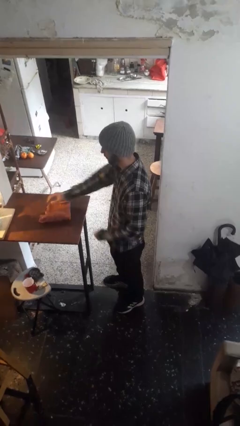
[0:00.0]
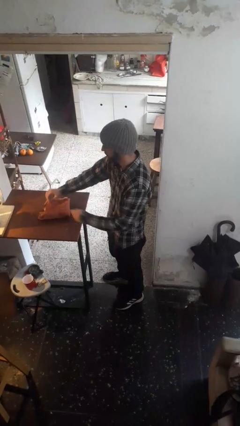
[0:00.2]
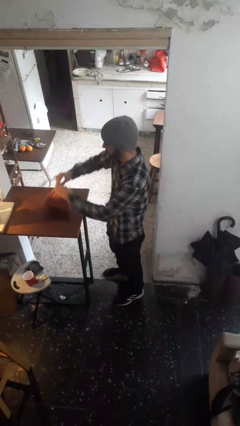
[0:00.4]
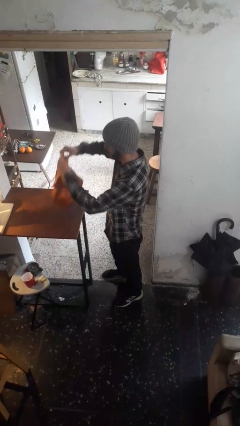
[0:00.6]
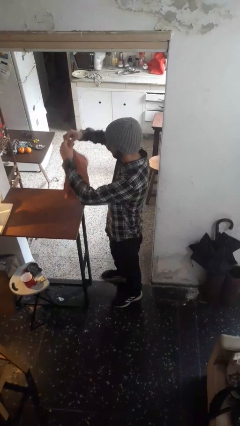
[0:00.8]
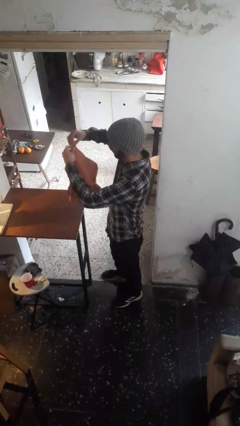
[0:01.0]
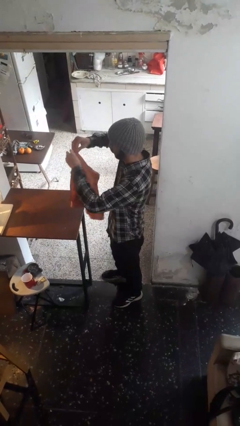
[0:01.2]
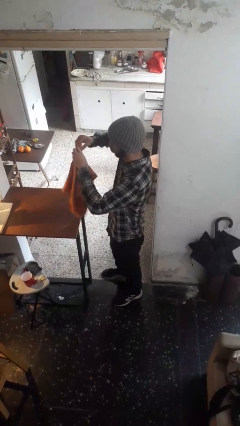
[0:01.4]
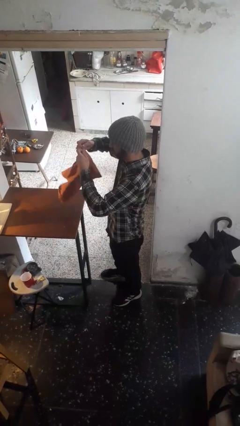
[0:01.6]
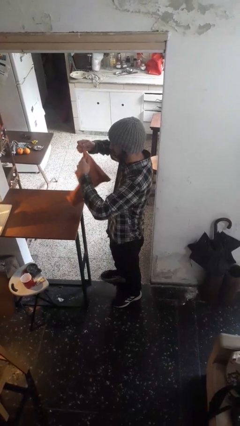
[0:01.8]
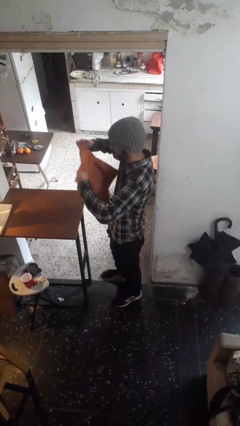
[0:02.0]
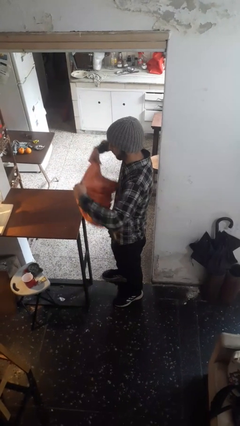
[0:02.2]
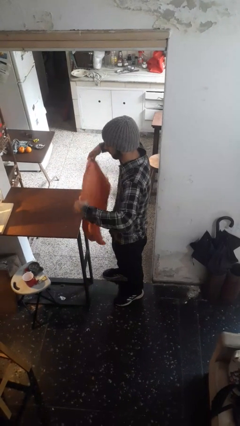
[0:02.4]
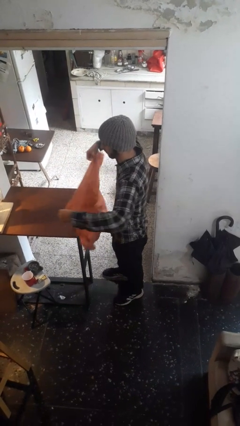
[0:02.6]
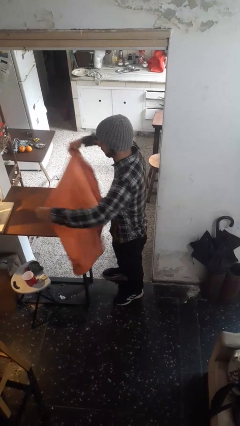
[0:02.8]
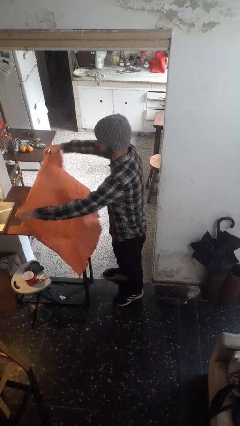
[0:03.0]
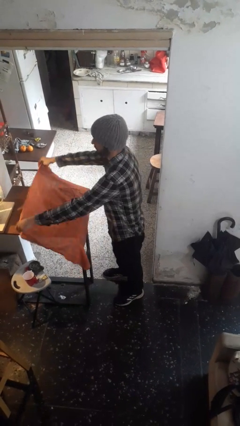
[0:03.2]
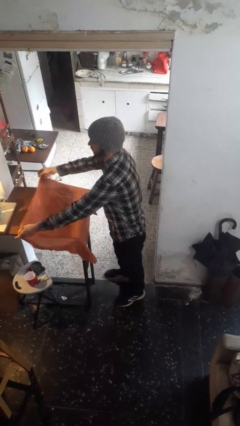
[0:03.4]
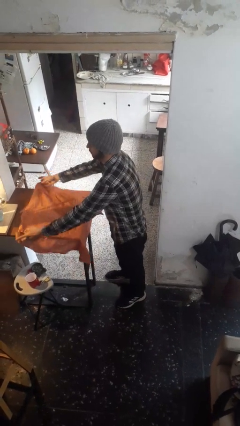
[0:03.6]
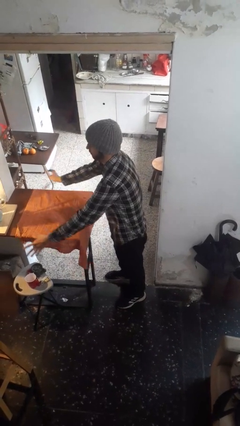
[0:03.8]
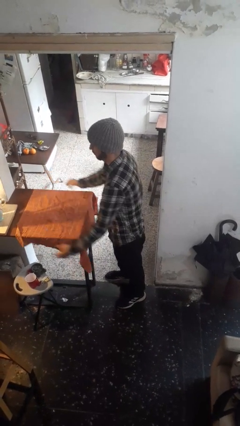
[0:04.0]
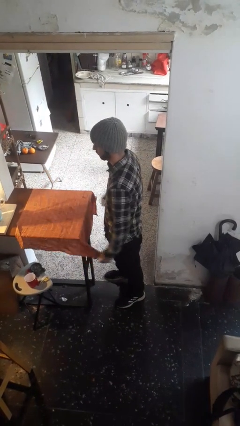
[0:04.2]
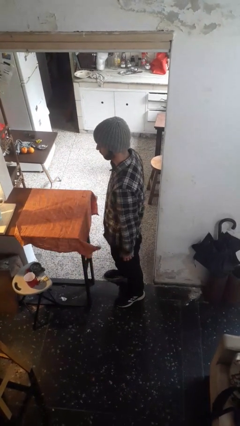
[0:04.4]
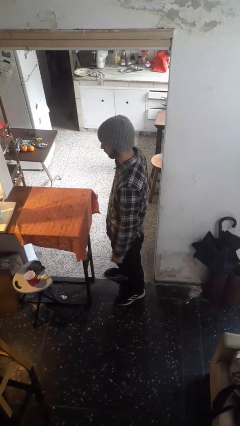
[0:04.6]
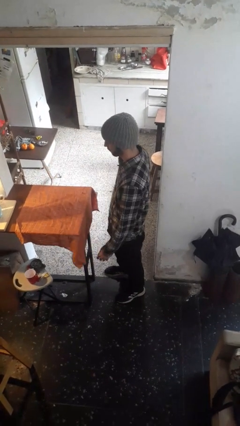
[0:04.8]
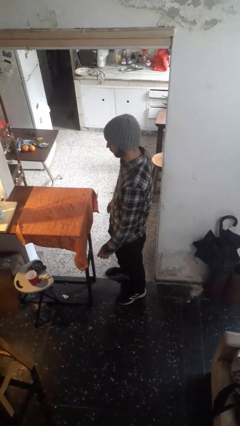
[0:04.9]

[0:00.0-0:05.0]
person spreads tablecloth

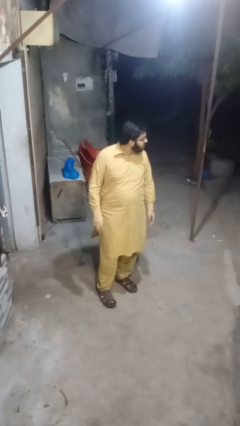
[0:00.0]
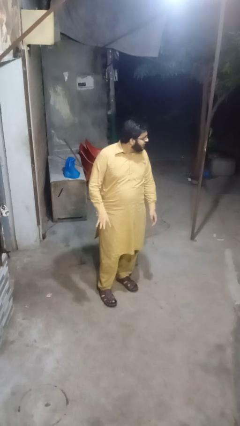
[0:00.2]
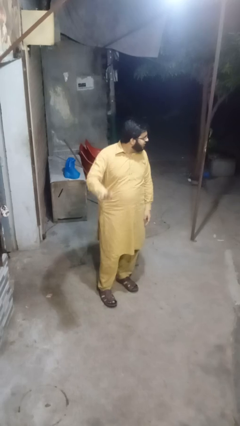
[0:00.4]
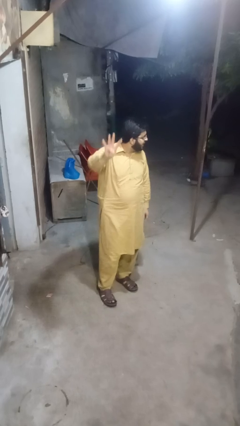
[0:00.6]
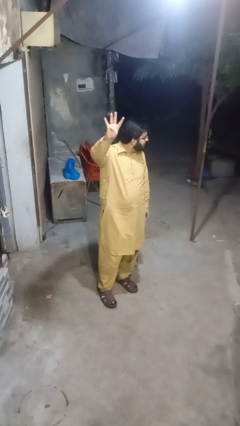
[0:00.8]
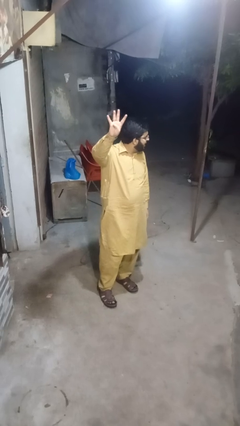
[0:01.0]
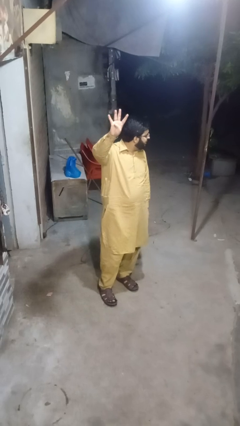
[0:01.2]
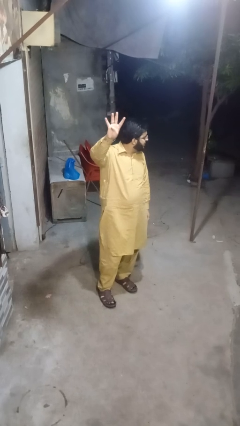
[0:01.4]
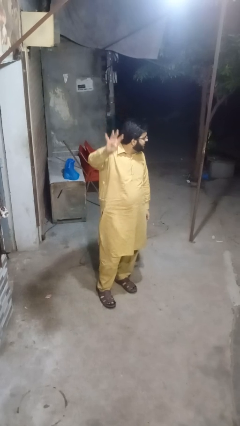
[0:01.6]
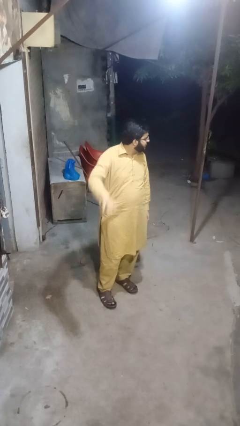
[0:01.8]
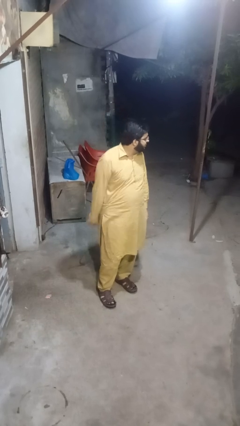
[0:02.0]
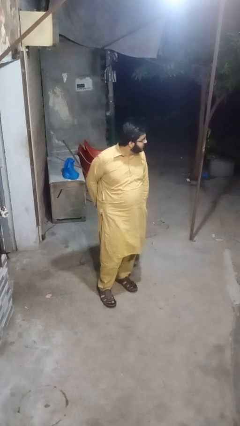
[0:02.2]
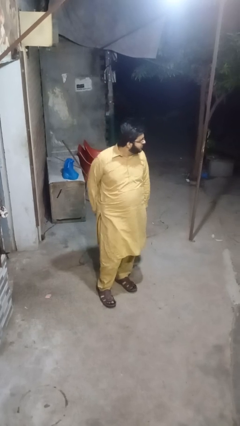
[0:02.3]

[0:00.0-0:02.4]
person gestures number four

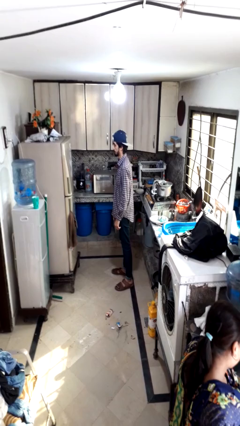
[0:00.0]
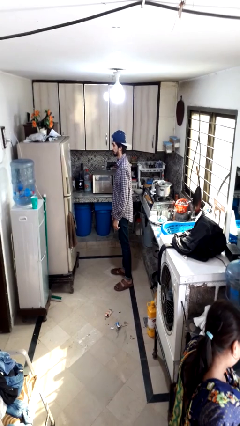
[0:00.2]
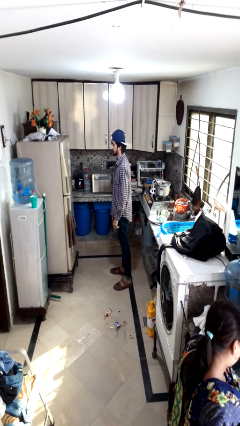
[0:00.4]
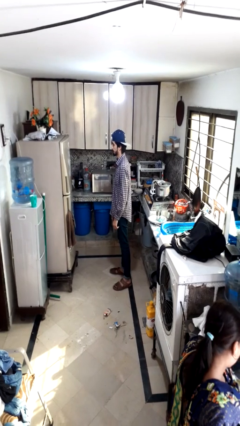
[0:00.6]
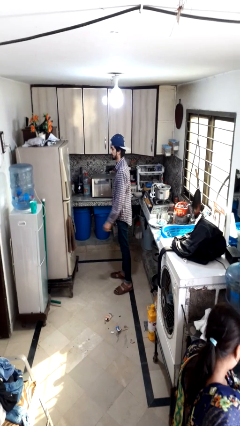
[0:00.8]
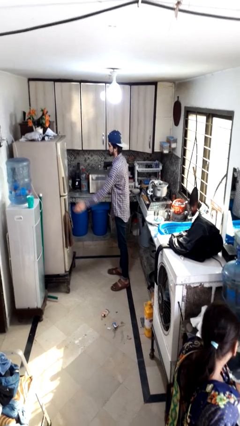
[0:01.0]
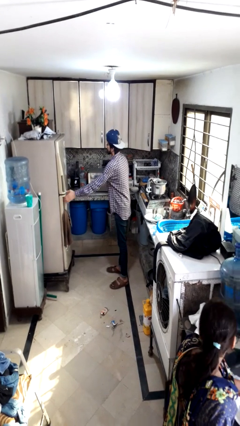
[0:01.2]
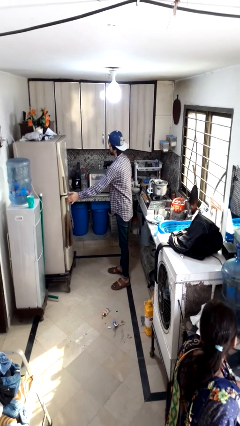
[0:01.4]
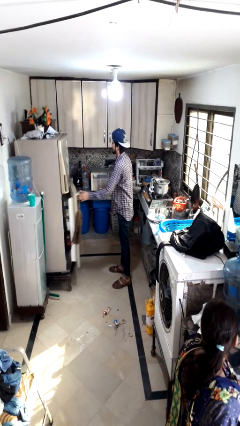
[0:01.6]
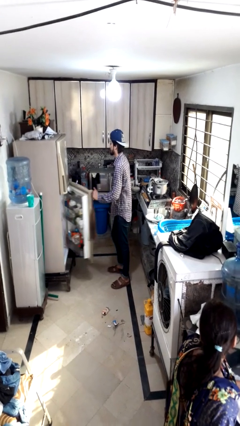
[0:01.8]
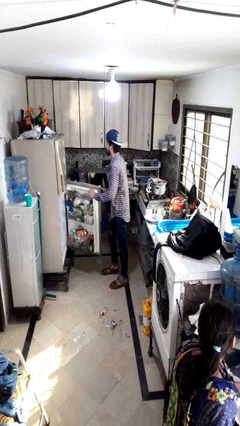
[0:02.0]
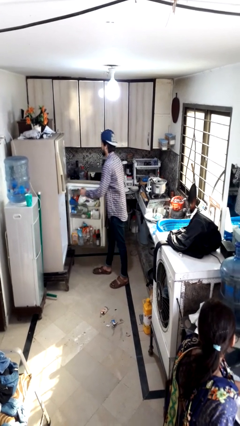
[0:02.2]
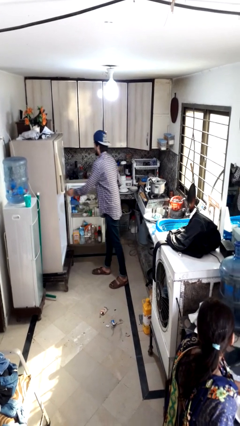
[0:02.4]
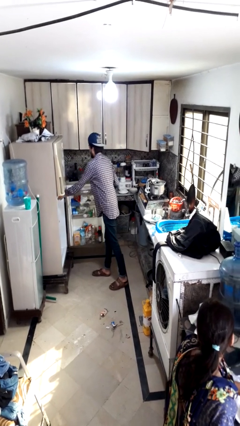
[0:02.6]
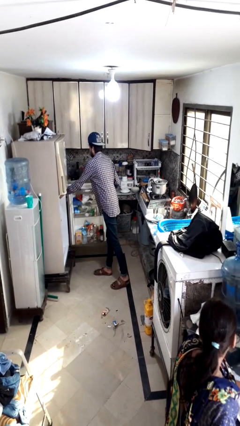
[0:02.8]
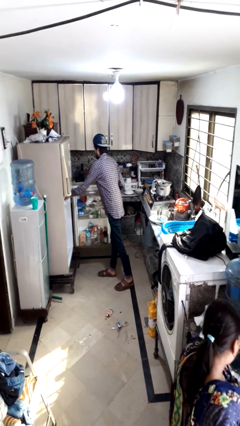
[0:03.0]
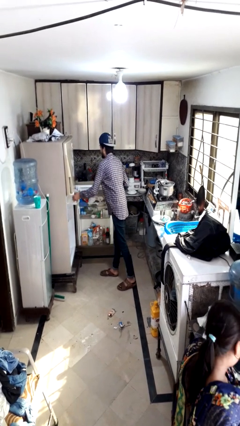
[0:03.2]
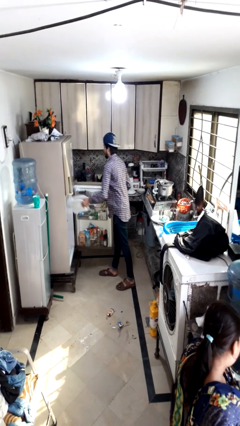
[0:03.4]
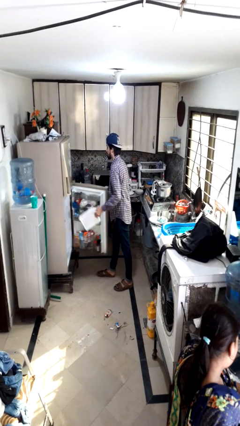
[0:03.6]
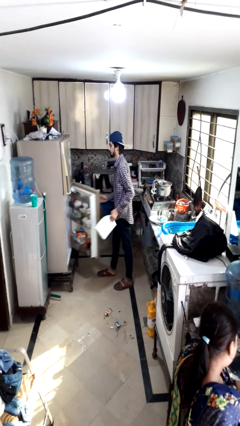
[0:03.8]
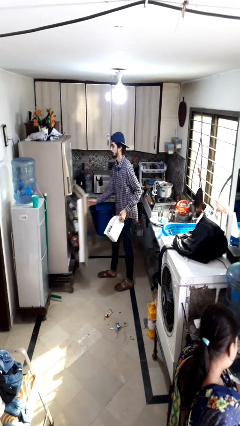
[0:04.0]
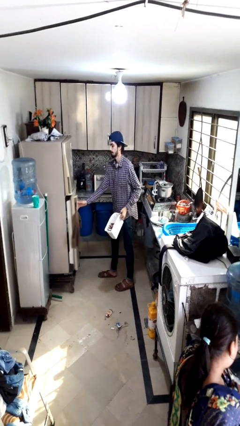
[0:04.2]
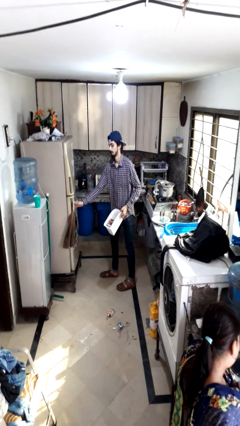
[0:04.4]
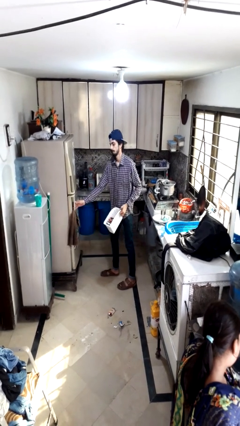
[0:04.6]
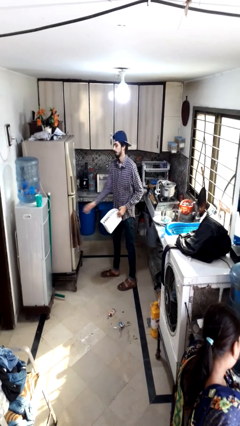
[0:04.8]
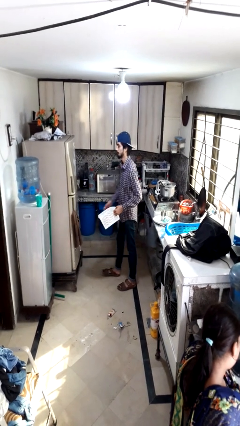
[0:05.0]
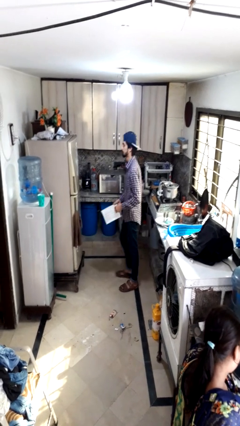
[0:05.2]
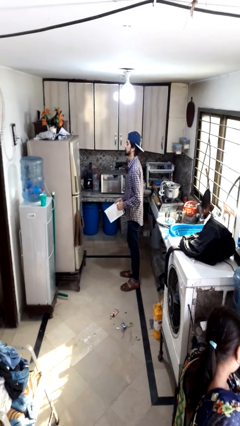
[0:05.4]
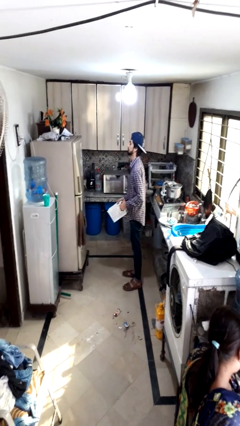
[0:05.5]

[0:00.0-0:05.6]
person takes object from refrigerator

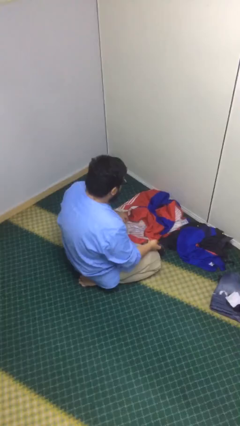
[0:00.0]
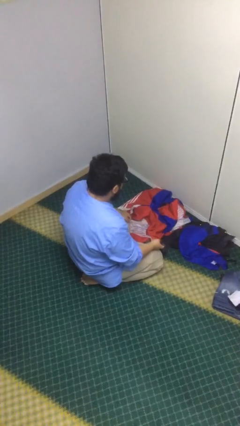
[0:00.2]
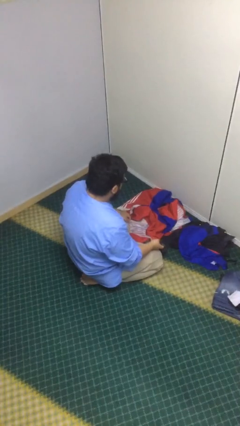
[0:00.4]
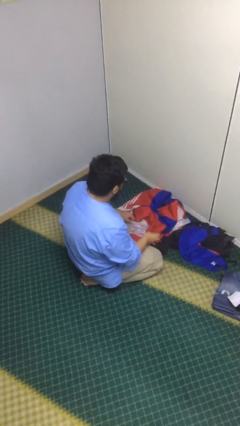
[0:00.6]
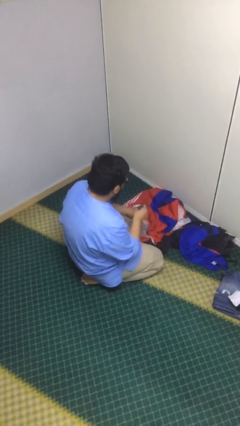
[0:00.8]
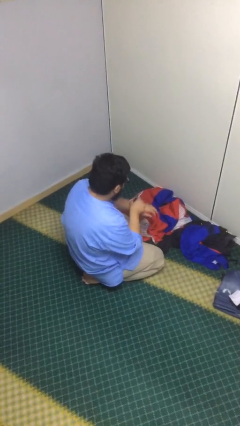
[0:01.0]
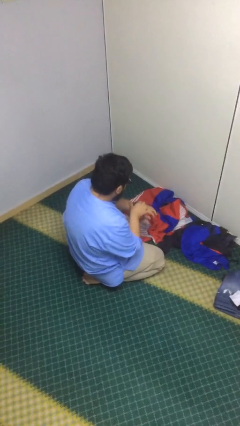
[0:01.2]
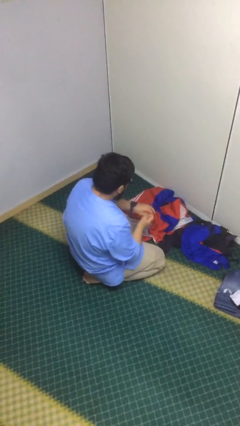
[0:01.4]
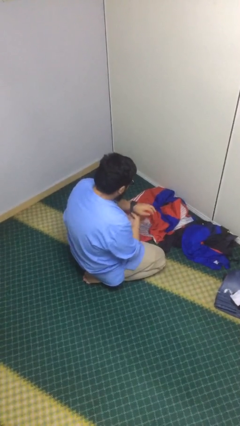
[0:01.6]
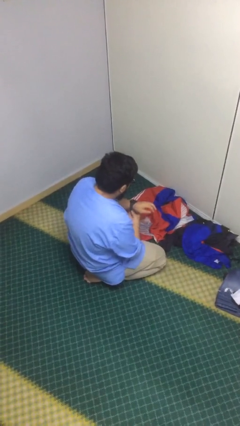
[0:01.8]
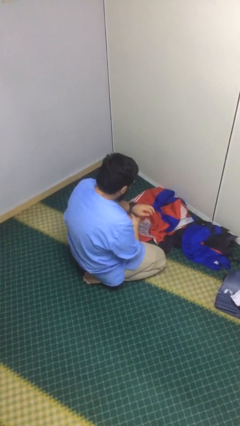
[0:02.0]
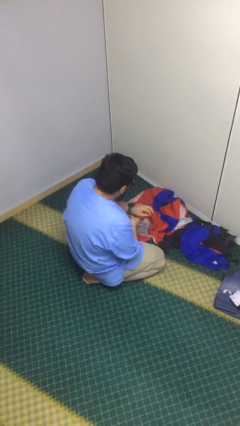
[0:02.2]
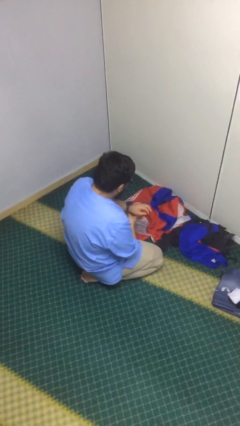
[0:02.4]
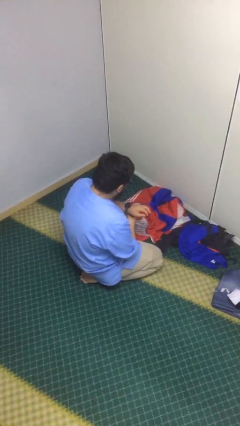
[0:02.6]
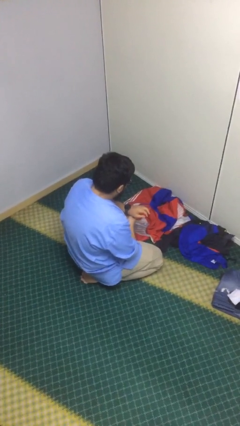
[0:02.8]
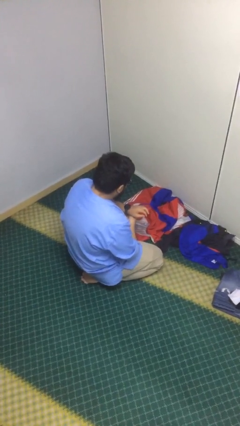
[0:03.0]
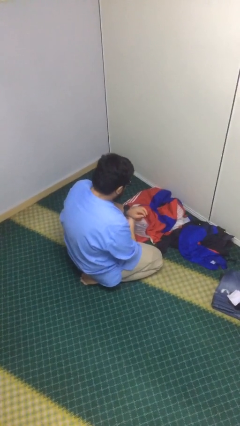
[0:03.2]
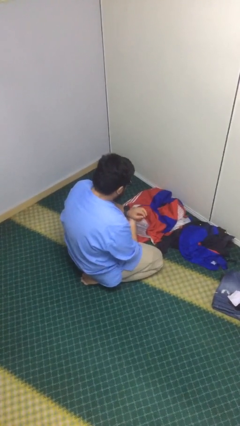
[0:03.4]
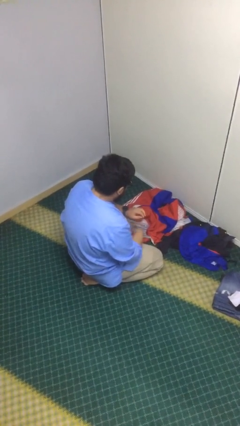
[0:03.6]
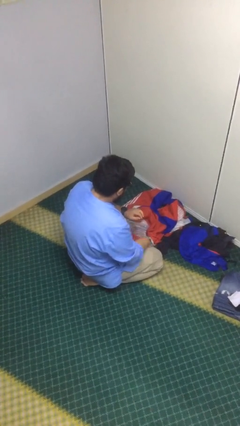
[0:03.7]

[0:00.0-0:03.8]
person puts on wristwatch

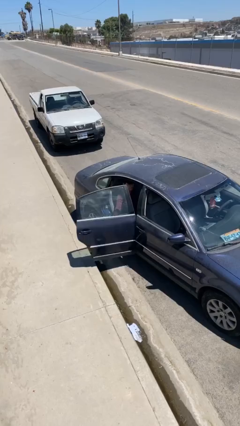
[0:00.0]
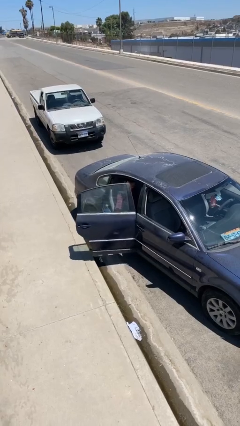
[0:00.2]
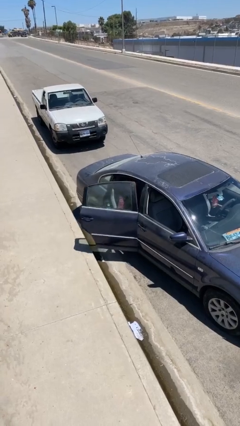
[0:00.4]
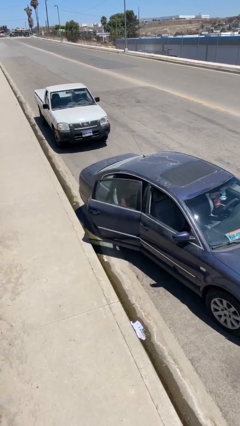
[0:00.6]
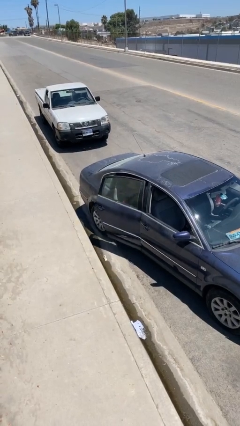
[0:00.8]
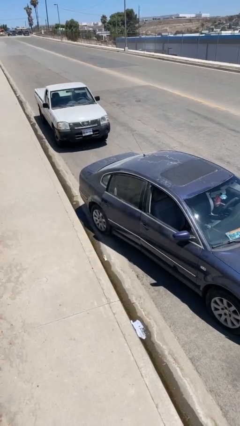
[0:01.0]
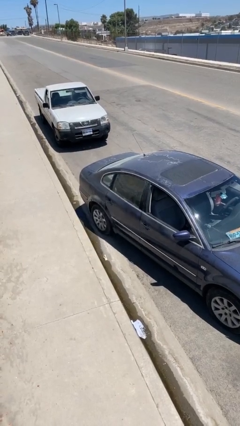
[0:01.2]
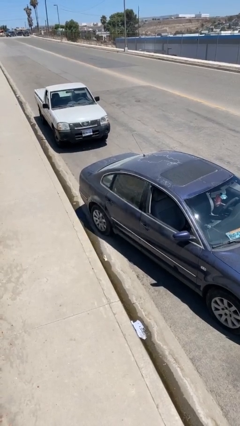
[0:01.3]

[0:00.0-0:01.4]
person closes car door
